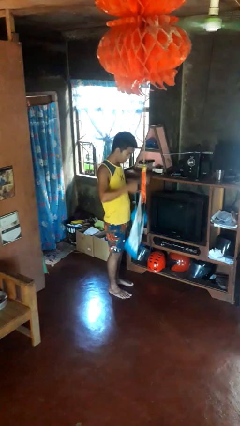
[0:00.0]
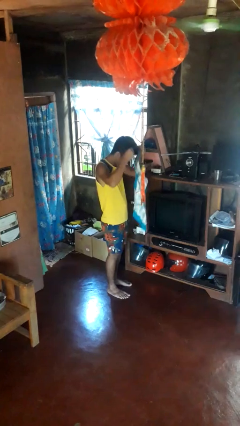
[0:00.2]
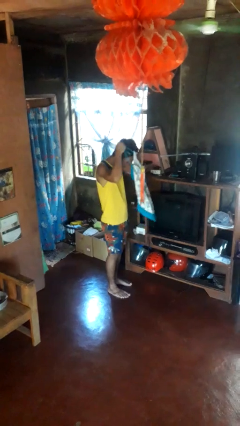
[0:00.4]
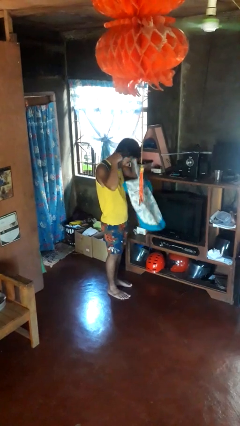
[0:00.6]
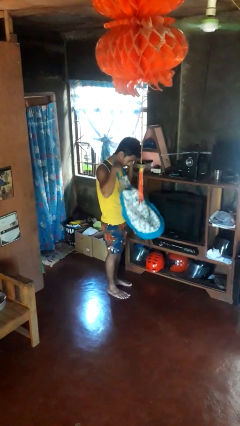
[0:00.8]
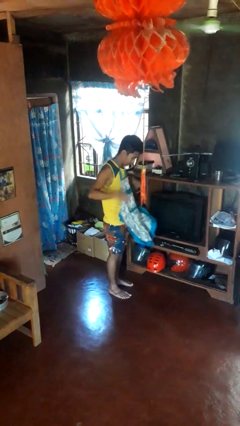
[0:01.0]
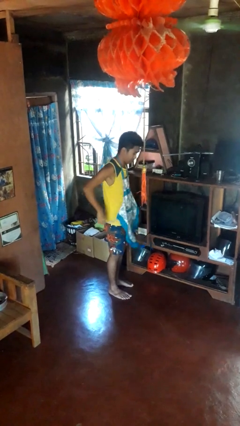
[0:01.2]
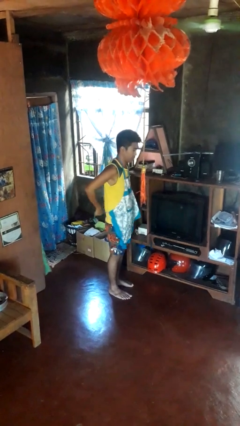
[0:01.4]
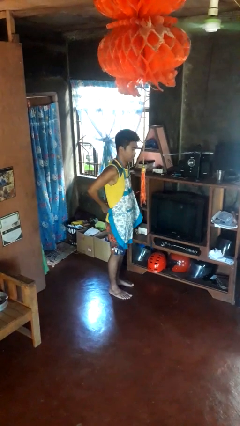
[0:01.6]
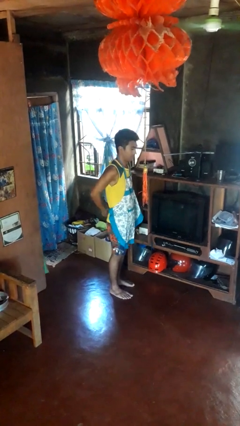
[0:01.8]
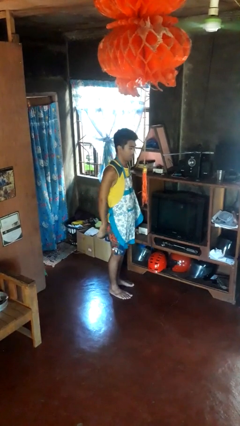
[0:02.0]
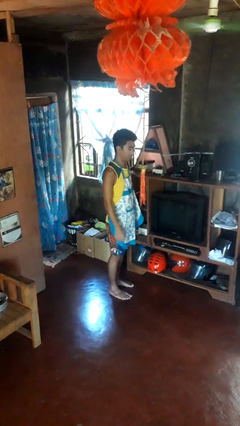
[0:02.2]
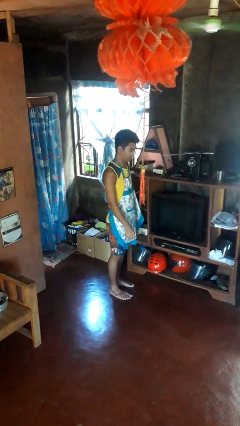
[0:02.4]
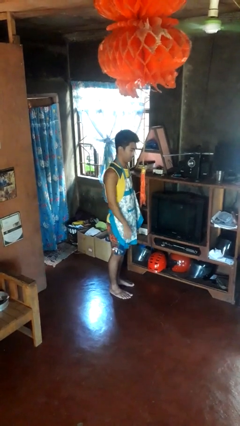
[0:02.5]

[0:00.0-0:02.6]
person puts on apron

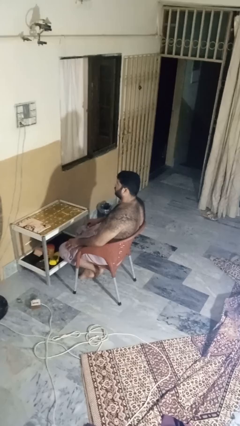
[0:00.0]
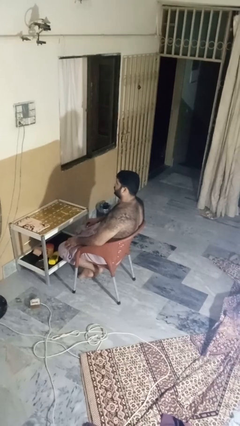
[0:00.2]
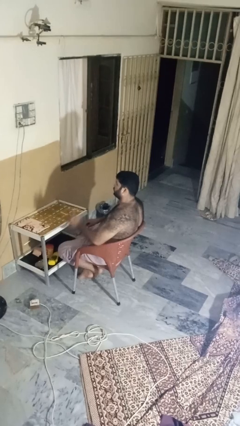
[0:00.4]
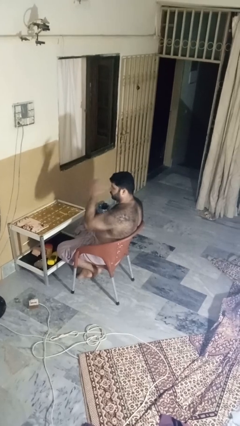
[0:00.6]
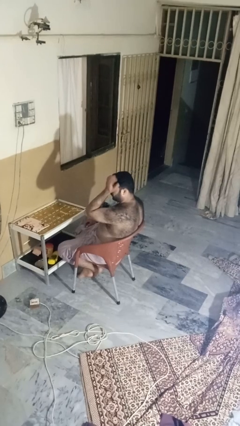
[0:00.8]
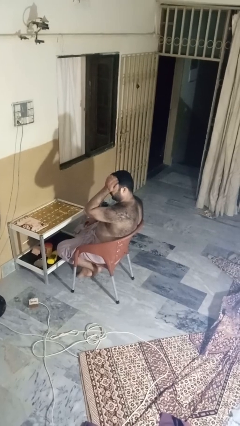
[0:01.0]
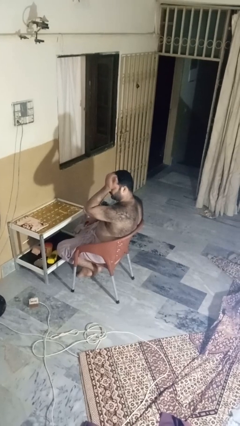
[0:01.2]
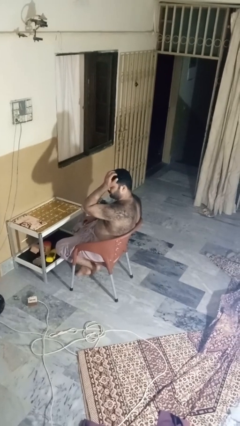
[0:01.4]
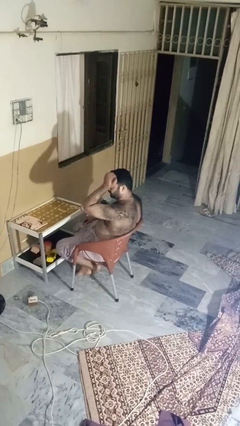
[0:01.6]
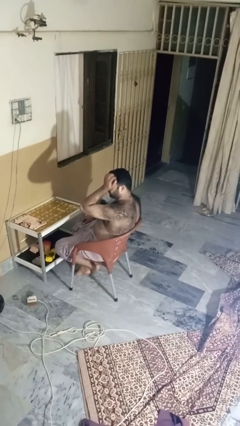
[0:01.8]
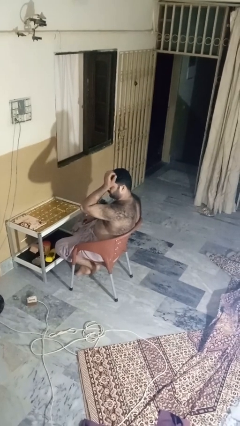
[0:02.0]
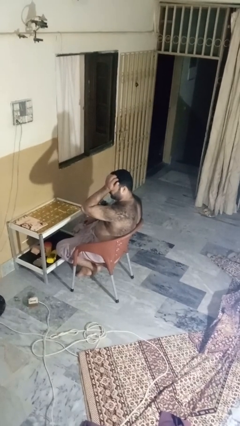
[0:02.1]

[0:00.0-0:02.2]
person rubs eyes

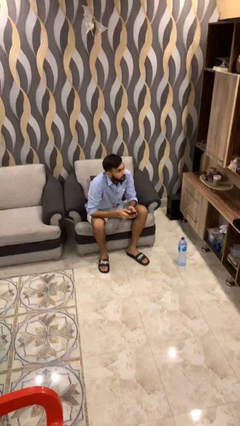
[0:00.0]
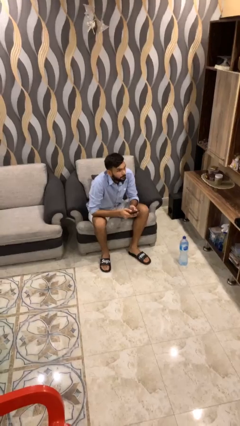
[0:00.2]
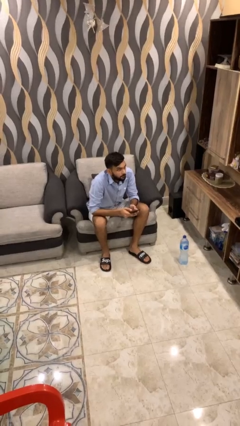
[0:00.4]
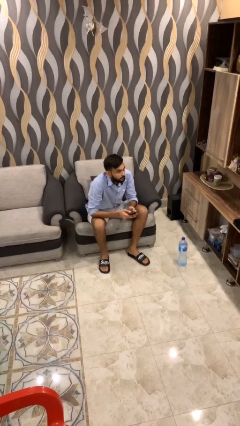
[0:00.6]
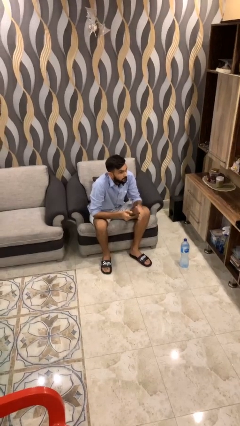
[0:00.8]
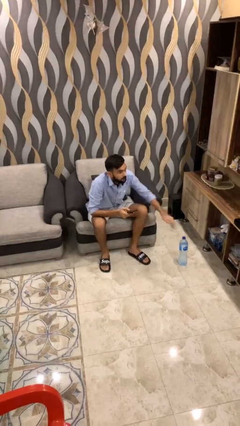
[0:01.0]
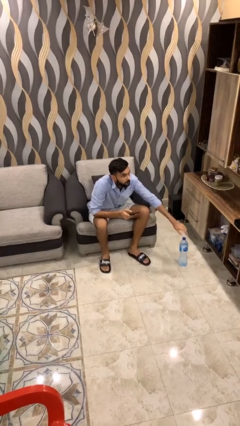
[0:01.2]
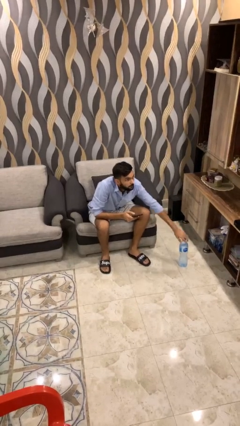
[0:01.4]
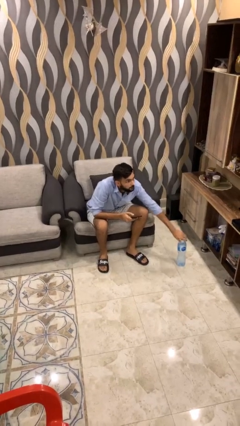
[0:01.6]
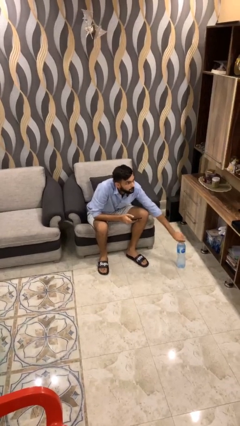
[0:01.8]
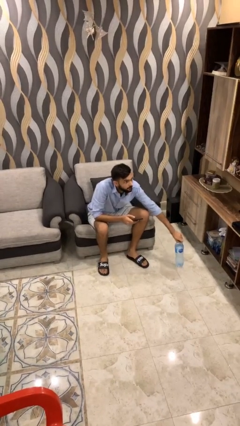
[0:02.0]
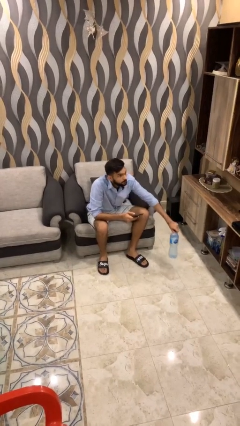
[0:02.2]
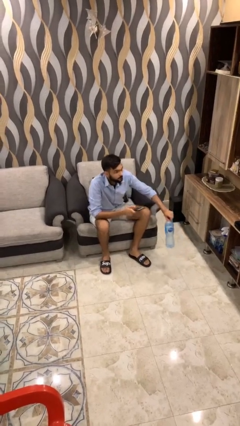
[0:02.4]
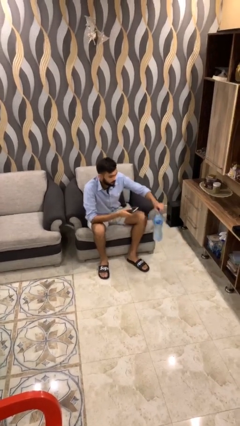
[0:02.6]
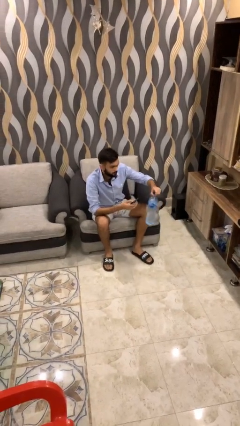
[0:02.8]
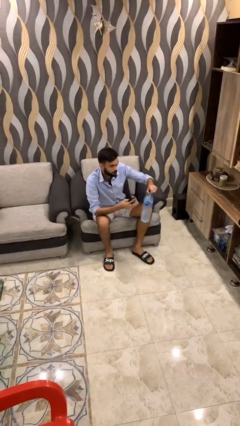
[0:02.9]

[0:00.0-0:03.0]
person picks up object from floor

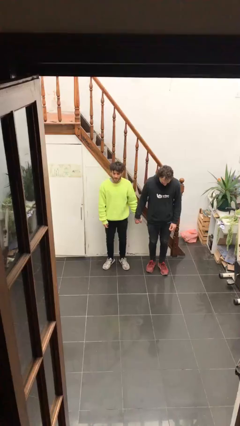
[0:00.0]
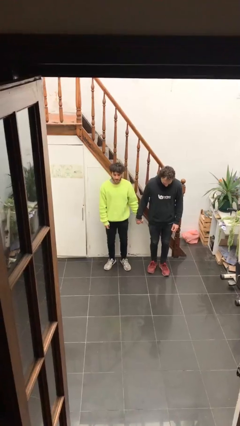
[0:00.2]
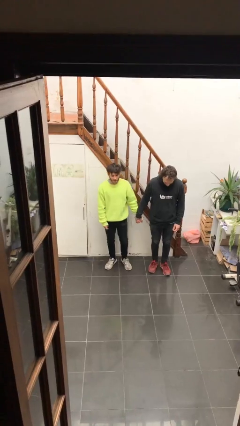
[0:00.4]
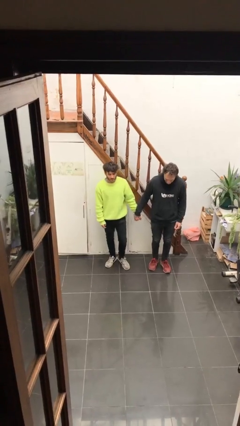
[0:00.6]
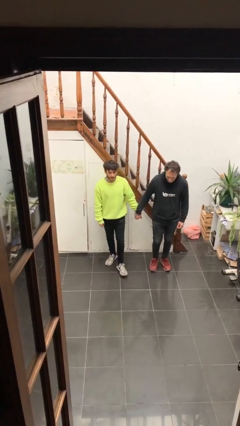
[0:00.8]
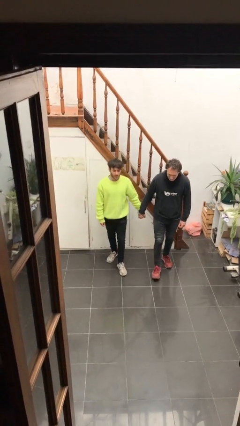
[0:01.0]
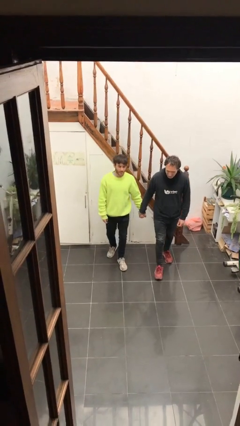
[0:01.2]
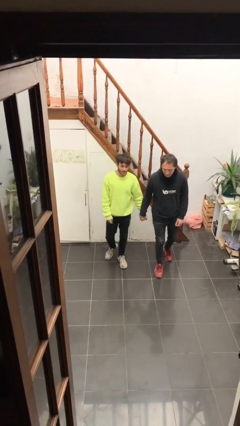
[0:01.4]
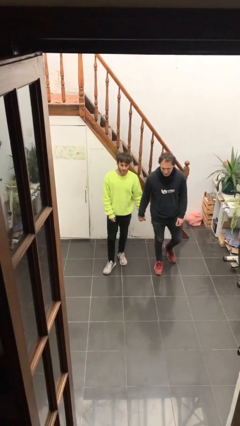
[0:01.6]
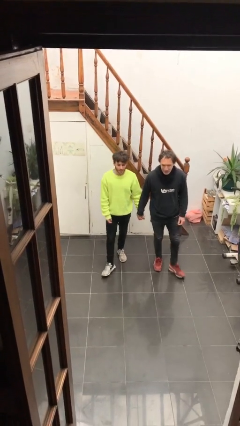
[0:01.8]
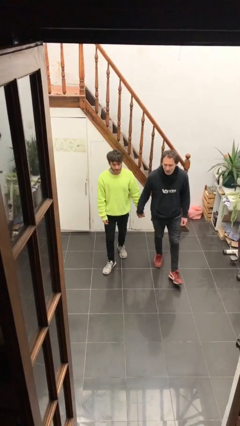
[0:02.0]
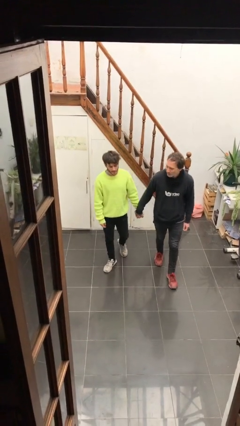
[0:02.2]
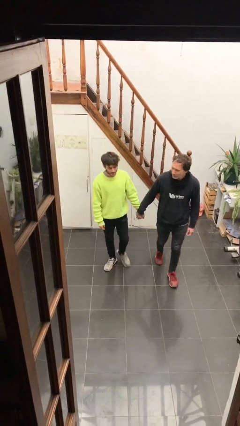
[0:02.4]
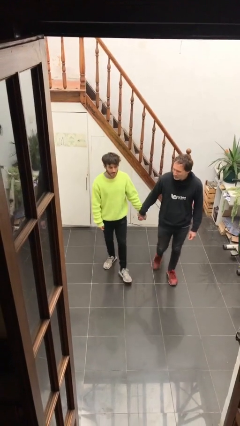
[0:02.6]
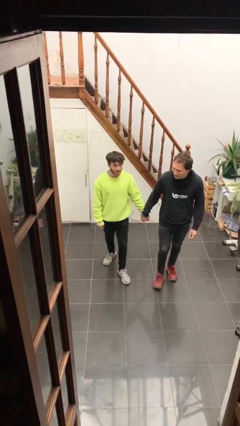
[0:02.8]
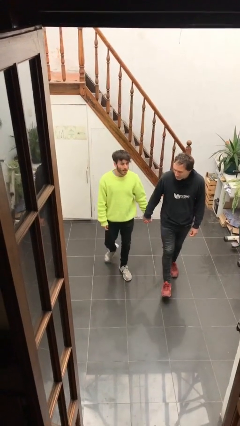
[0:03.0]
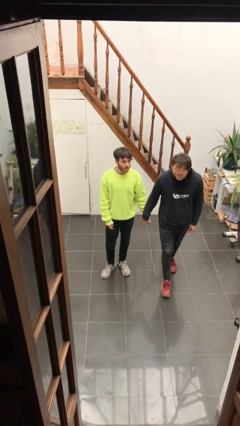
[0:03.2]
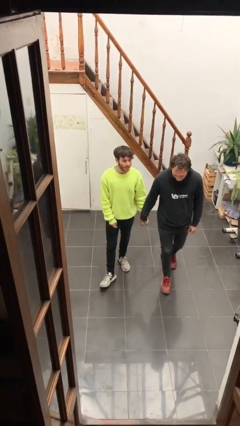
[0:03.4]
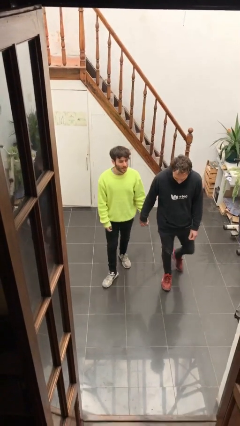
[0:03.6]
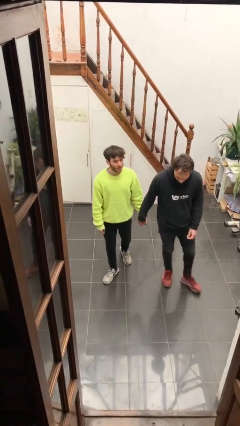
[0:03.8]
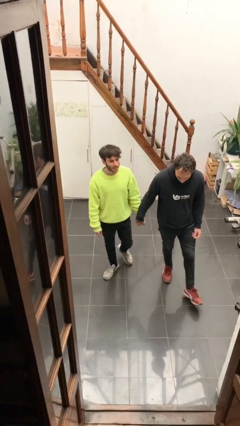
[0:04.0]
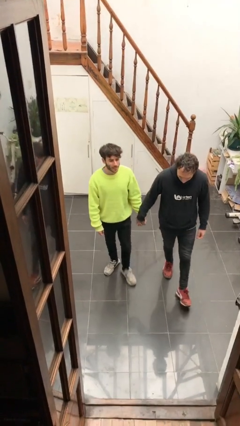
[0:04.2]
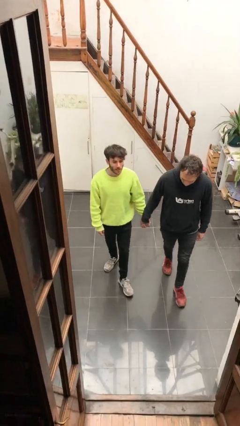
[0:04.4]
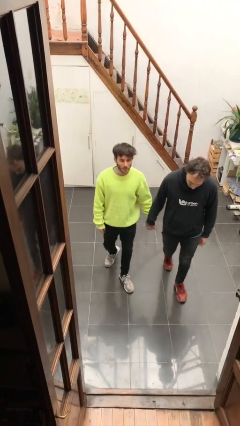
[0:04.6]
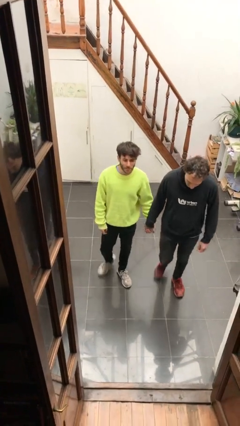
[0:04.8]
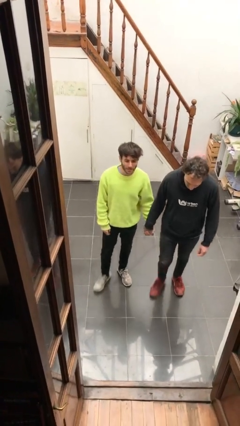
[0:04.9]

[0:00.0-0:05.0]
person holds hand

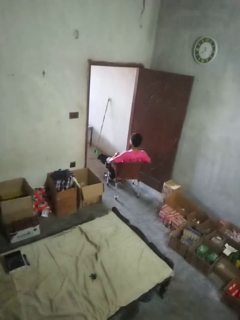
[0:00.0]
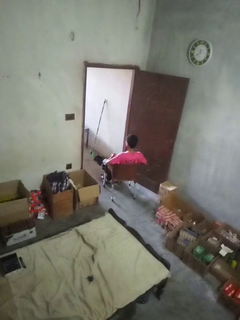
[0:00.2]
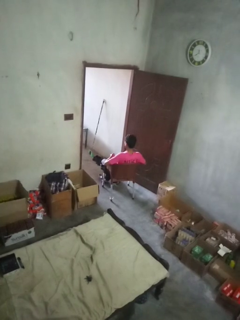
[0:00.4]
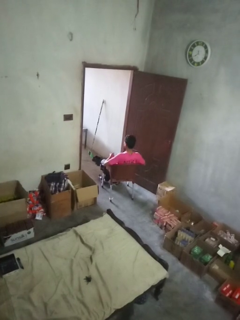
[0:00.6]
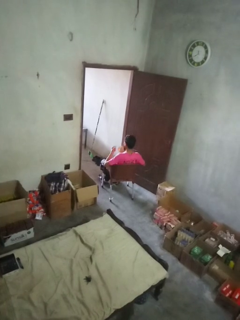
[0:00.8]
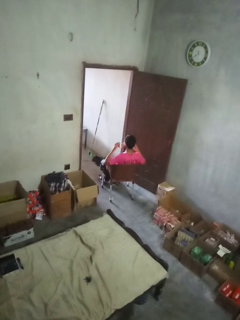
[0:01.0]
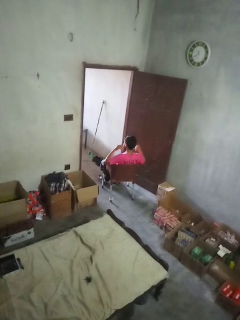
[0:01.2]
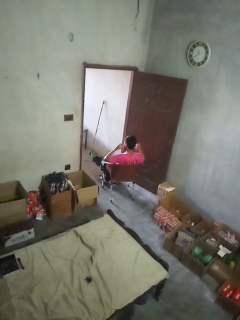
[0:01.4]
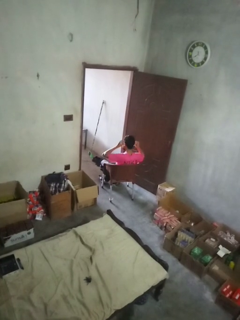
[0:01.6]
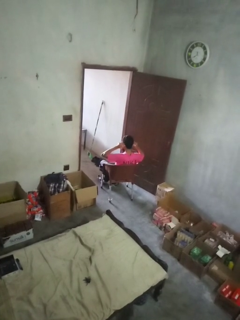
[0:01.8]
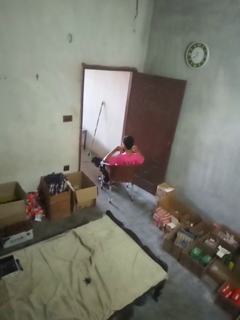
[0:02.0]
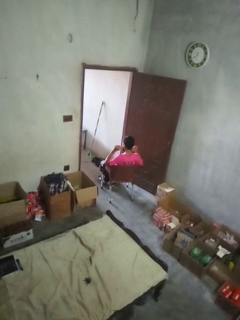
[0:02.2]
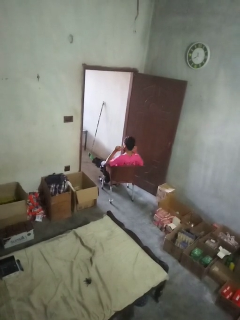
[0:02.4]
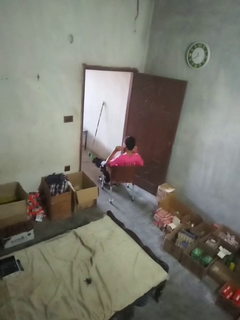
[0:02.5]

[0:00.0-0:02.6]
person puts on facemask

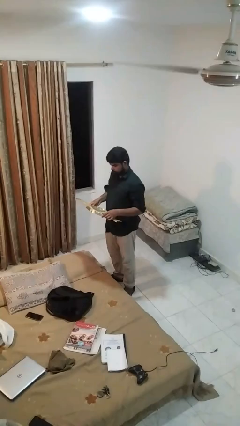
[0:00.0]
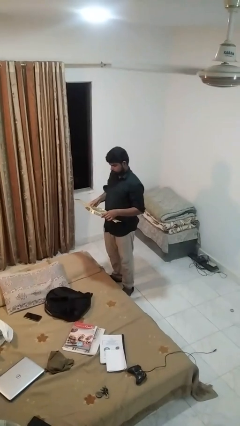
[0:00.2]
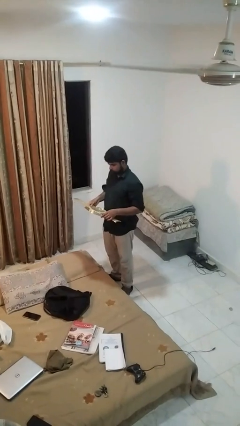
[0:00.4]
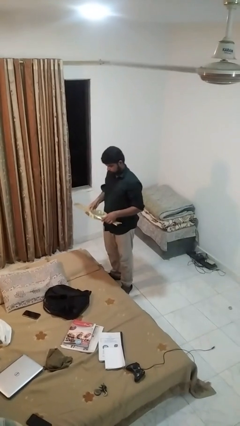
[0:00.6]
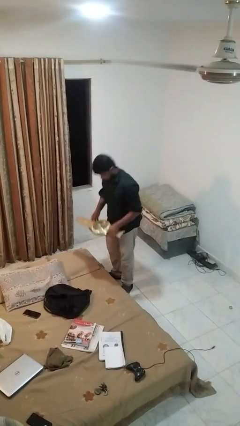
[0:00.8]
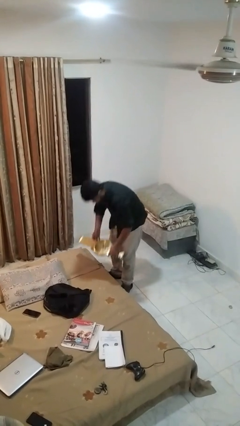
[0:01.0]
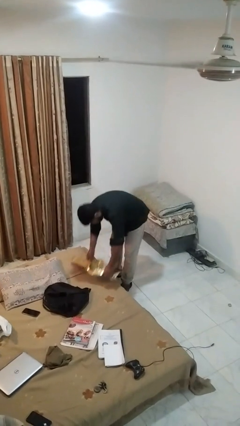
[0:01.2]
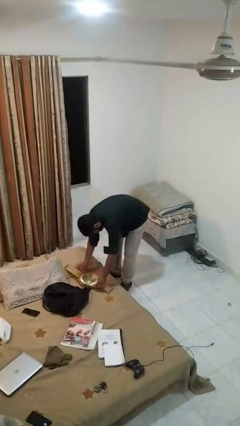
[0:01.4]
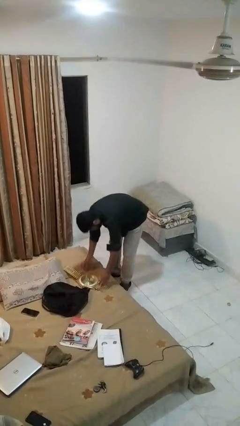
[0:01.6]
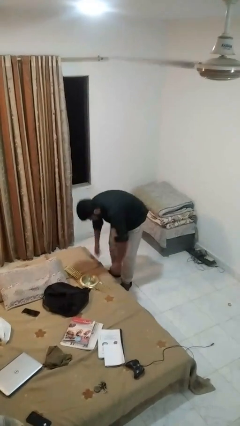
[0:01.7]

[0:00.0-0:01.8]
person puts down object on bed

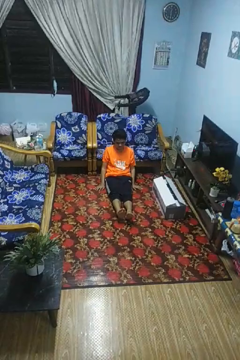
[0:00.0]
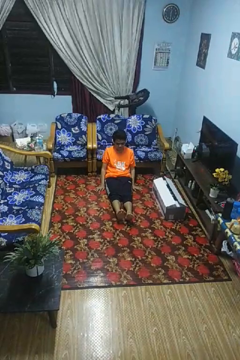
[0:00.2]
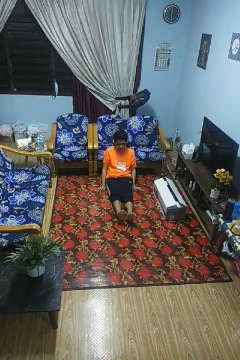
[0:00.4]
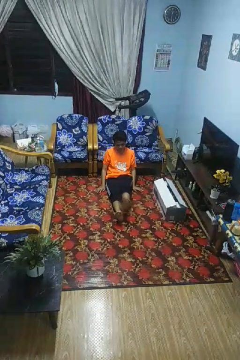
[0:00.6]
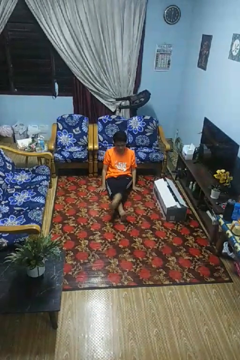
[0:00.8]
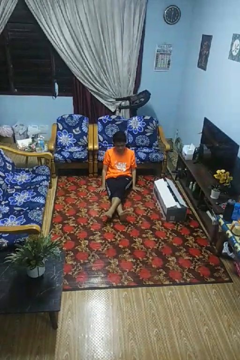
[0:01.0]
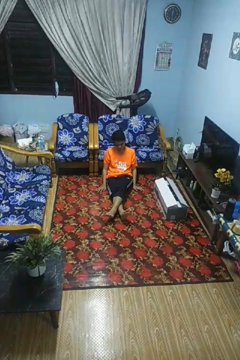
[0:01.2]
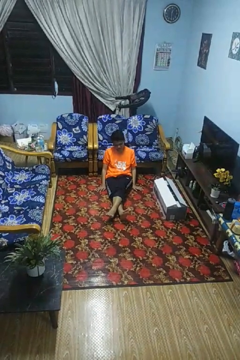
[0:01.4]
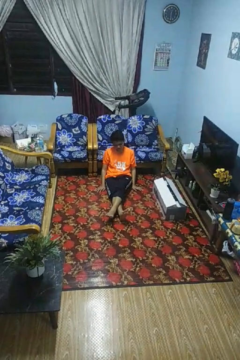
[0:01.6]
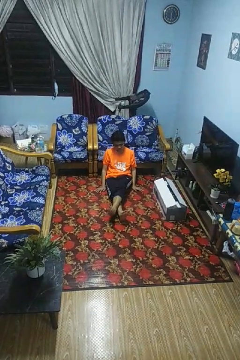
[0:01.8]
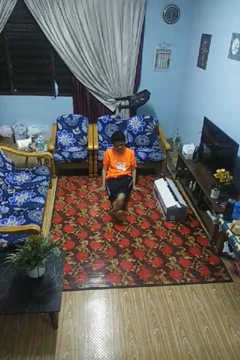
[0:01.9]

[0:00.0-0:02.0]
person crosses legs
